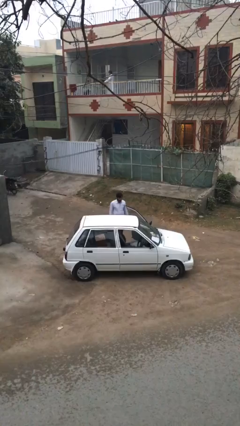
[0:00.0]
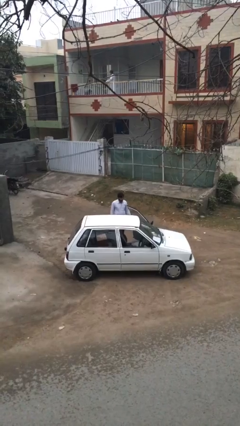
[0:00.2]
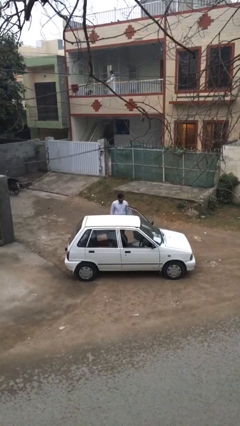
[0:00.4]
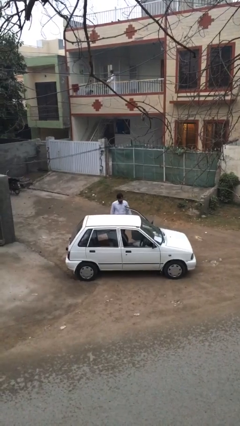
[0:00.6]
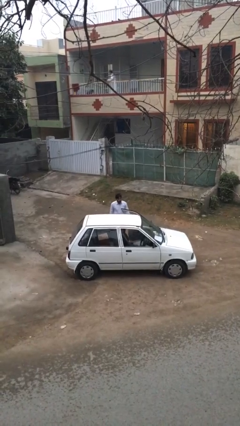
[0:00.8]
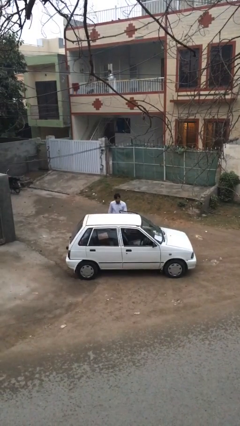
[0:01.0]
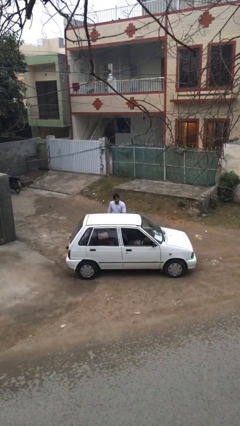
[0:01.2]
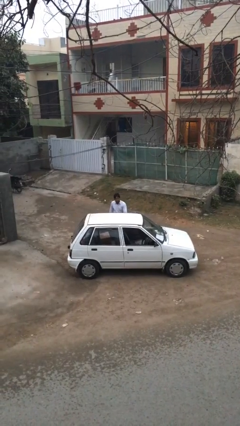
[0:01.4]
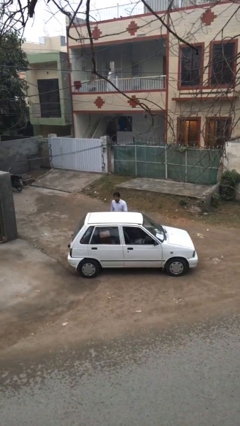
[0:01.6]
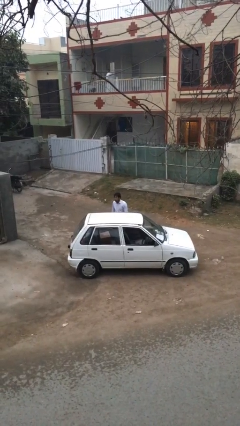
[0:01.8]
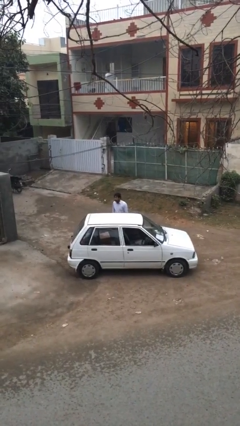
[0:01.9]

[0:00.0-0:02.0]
person closes car door

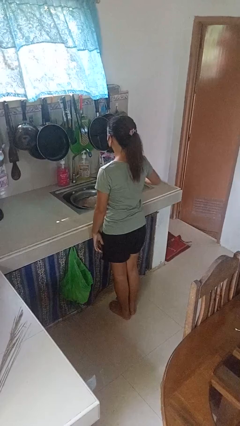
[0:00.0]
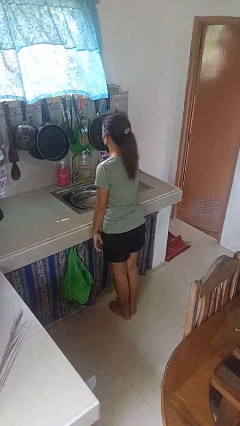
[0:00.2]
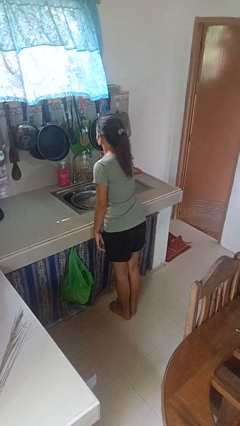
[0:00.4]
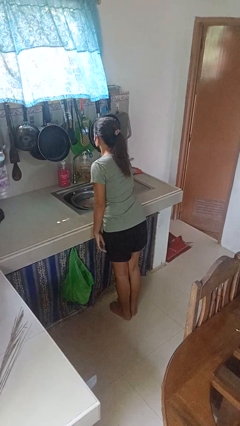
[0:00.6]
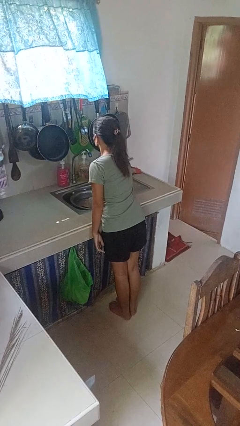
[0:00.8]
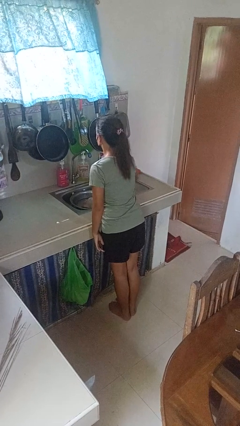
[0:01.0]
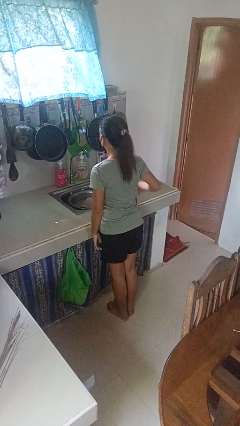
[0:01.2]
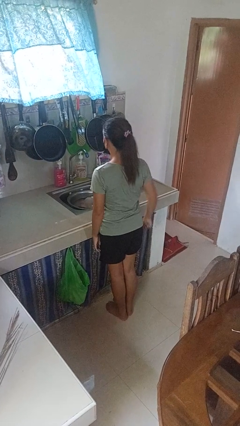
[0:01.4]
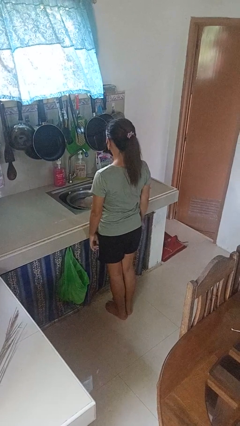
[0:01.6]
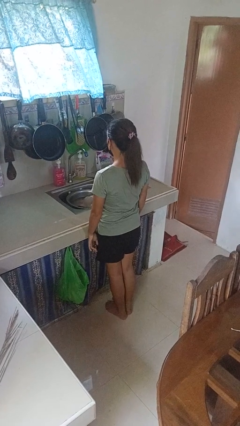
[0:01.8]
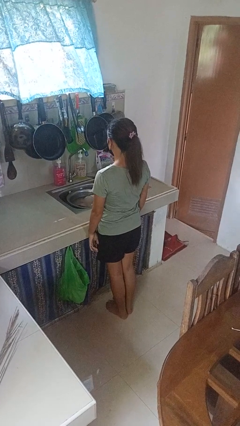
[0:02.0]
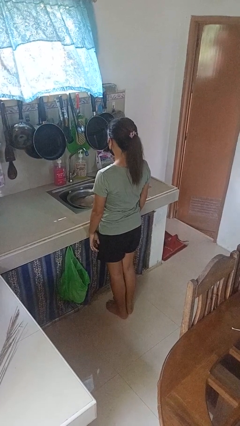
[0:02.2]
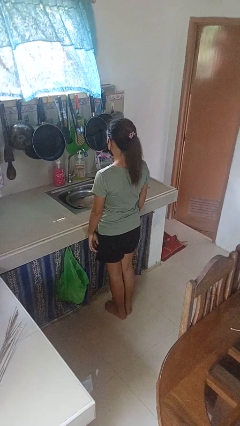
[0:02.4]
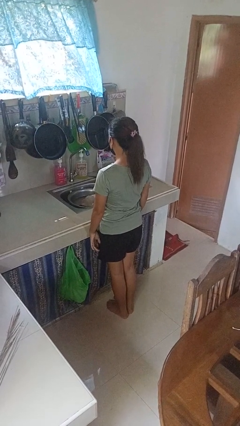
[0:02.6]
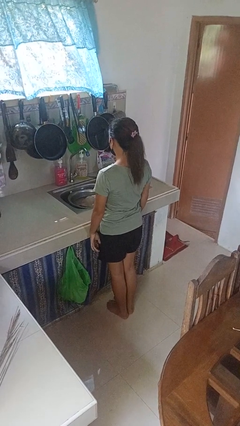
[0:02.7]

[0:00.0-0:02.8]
person turns off faucet

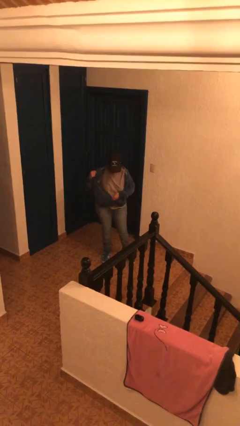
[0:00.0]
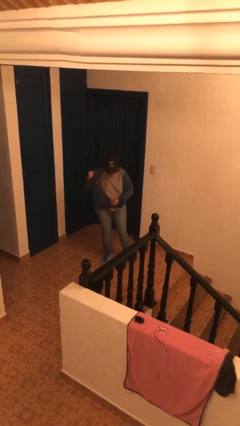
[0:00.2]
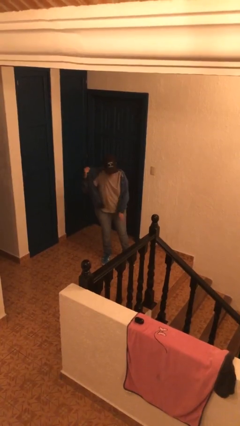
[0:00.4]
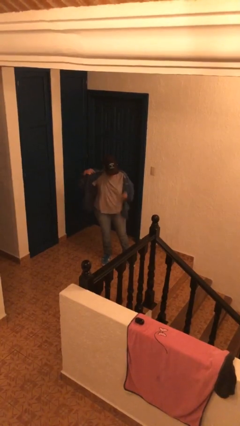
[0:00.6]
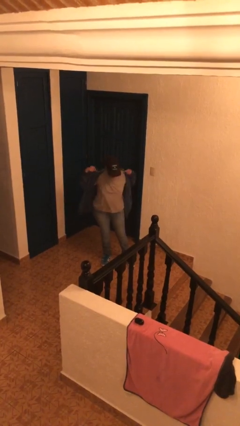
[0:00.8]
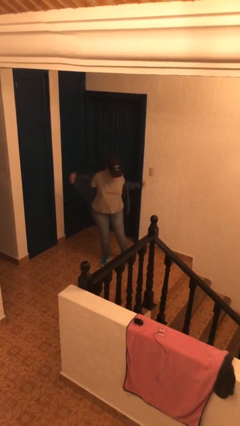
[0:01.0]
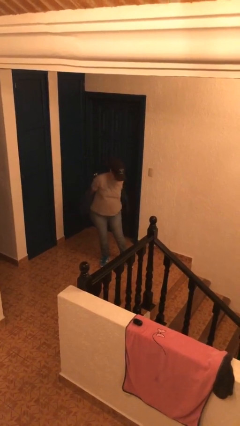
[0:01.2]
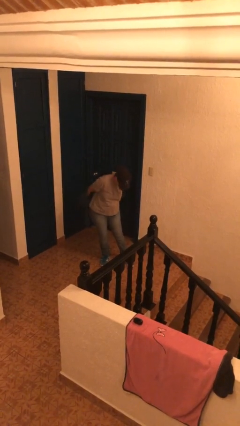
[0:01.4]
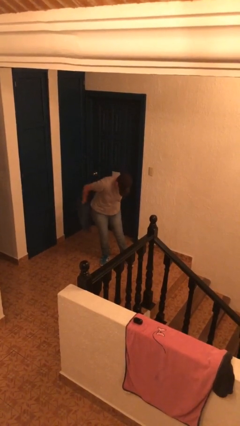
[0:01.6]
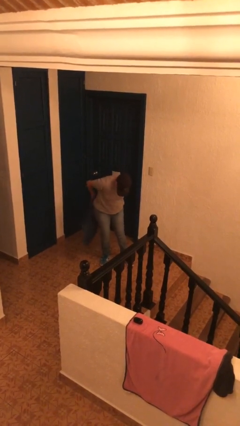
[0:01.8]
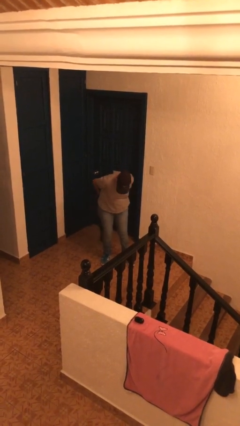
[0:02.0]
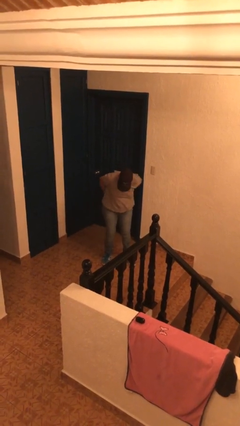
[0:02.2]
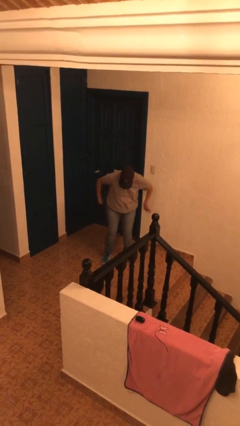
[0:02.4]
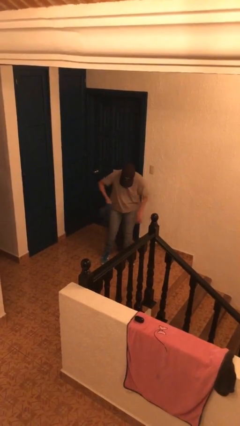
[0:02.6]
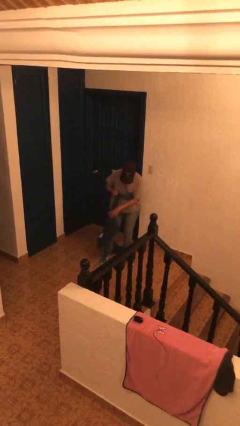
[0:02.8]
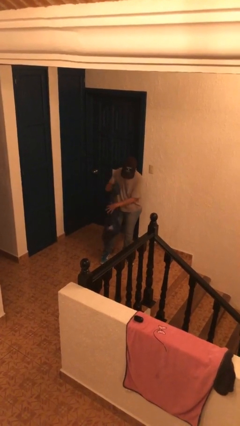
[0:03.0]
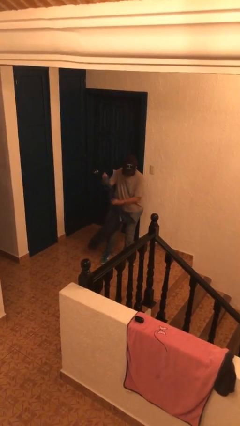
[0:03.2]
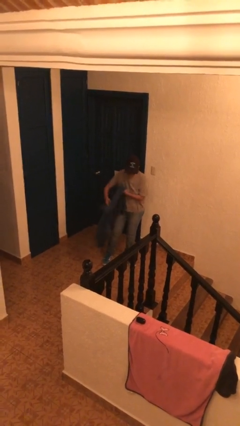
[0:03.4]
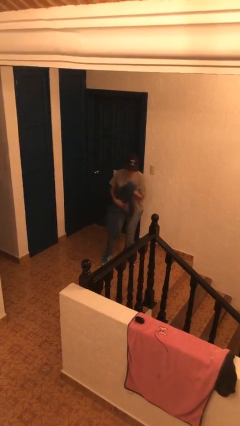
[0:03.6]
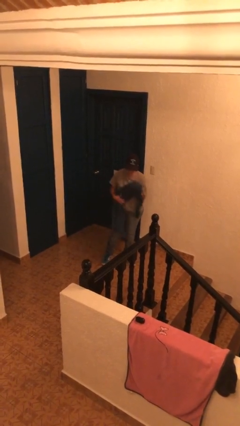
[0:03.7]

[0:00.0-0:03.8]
person takes off jacket

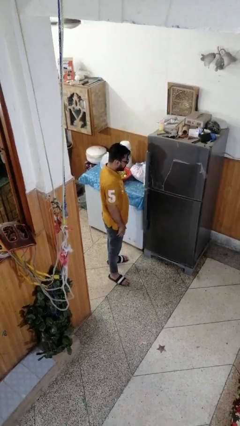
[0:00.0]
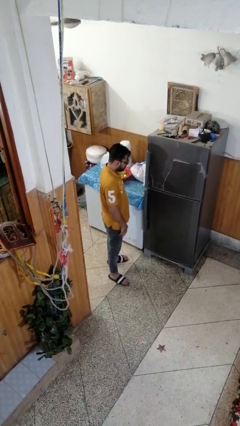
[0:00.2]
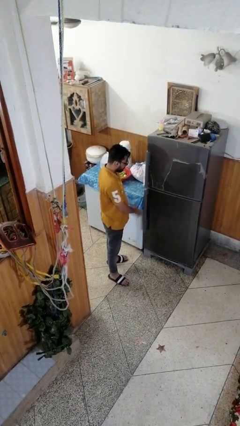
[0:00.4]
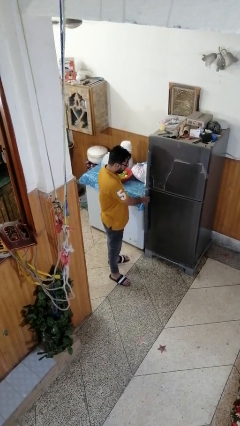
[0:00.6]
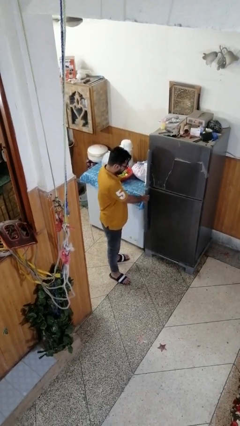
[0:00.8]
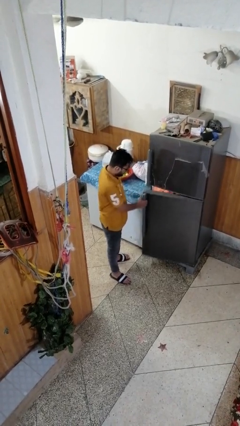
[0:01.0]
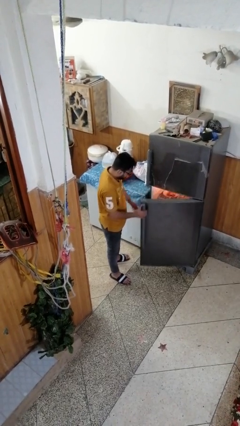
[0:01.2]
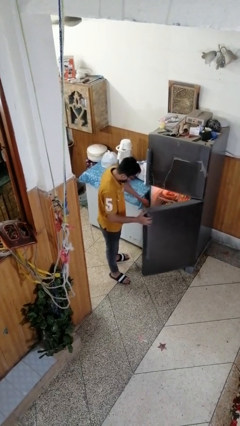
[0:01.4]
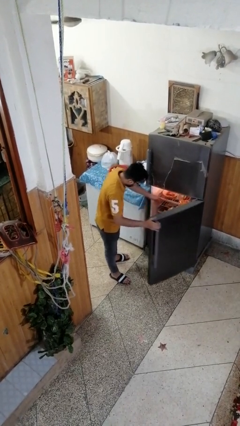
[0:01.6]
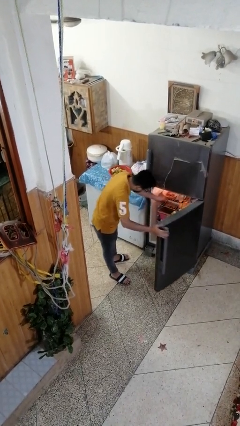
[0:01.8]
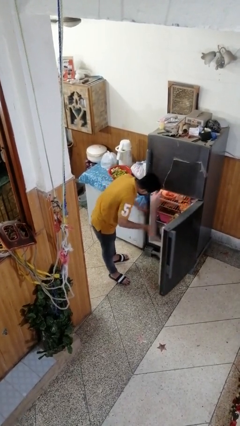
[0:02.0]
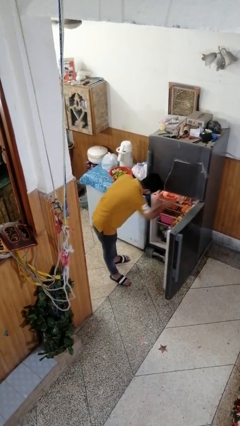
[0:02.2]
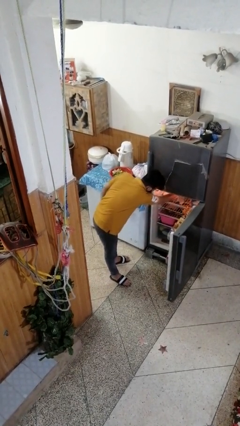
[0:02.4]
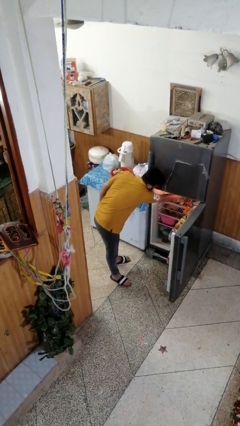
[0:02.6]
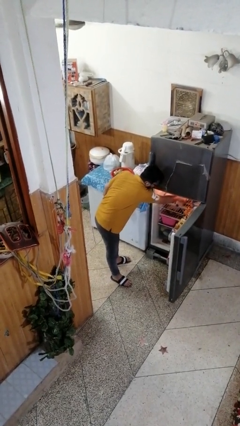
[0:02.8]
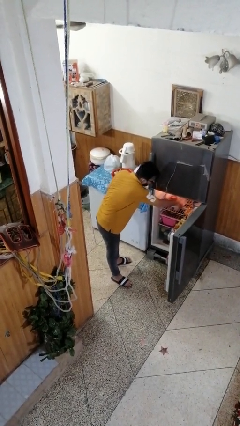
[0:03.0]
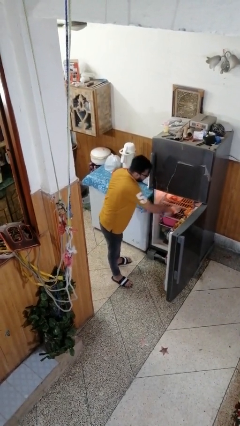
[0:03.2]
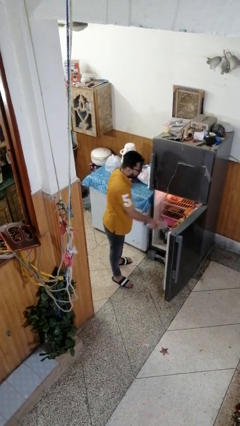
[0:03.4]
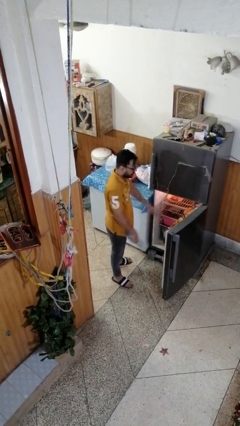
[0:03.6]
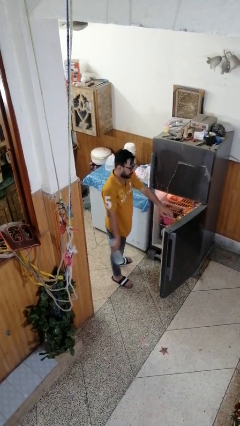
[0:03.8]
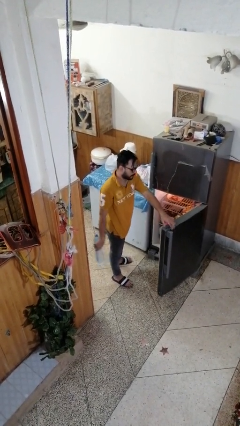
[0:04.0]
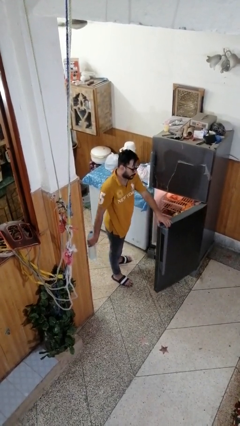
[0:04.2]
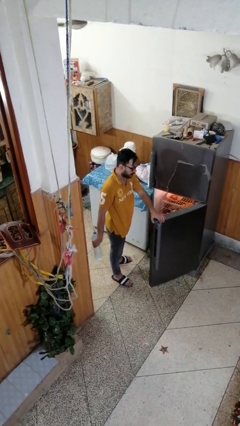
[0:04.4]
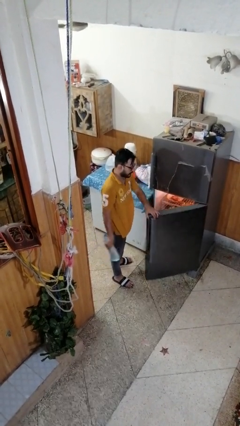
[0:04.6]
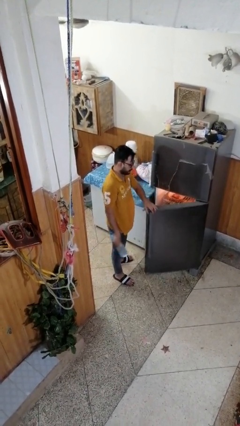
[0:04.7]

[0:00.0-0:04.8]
person takes object from refrigerator

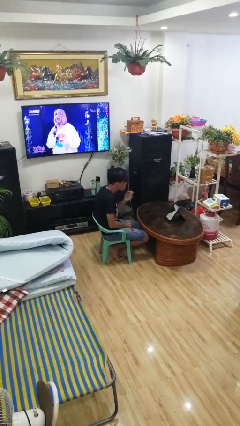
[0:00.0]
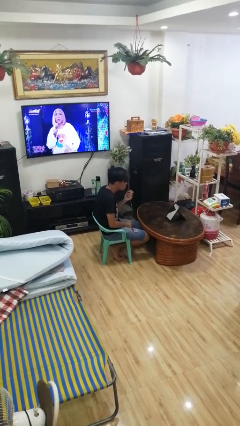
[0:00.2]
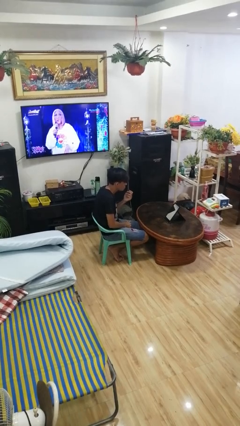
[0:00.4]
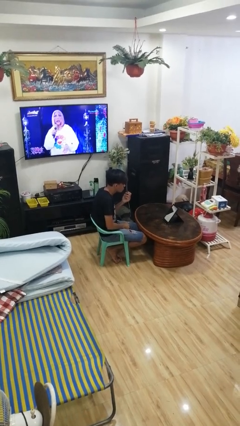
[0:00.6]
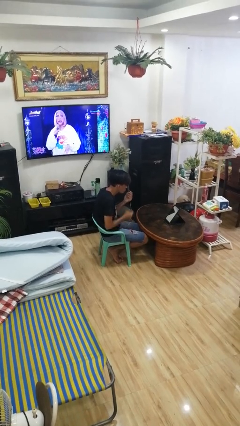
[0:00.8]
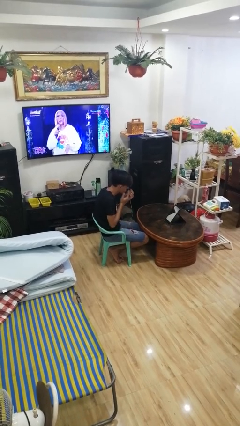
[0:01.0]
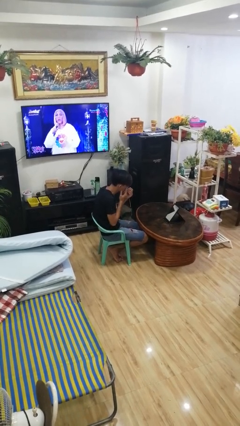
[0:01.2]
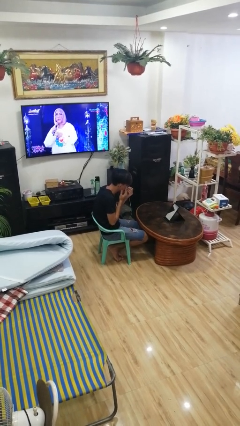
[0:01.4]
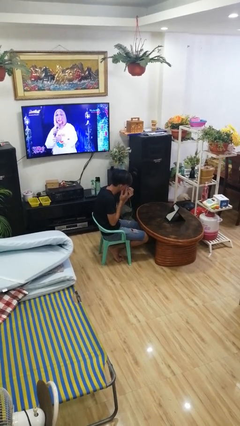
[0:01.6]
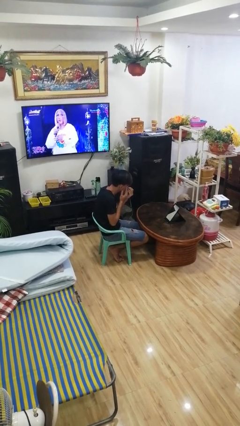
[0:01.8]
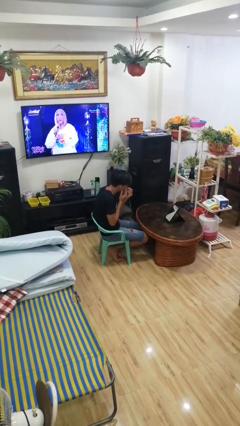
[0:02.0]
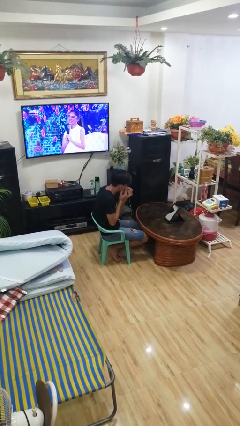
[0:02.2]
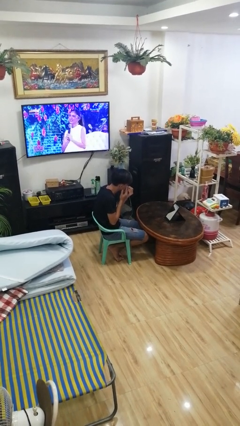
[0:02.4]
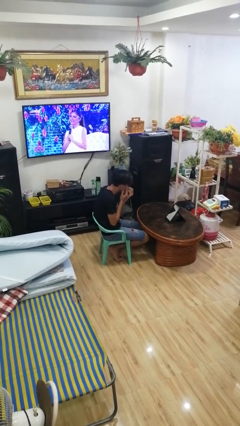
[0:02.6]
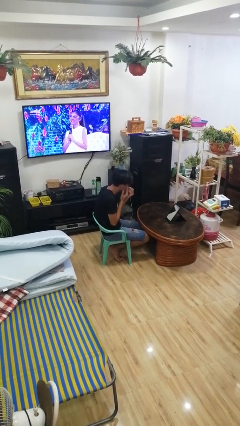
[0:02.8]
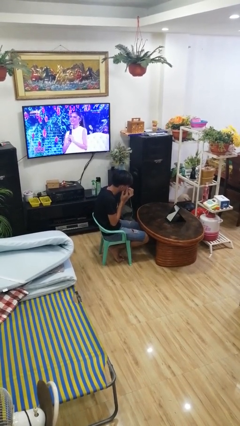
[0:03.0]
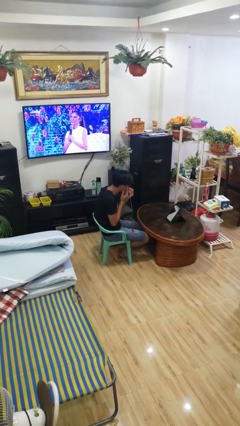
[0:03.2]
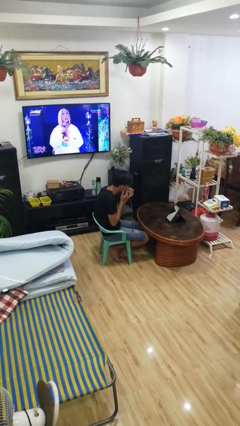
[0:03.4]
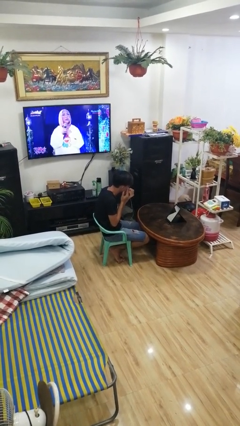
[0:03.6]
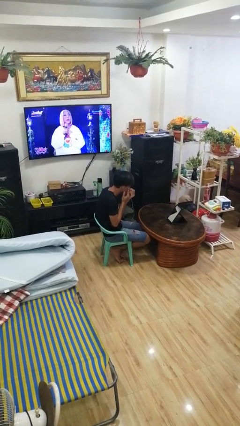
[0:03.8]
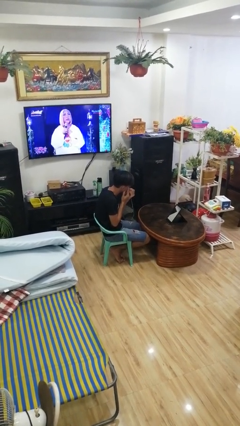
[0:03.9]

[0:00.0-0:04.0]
person applies eye makeup
